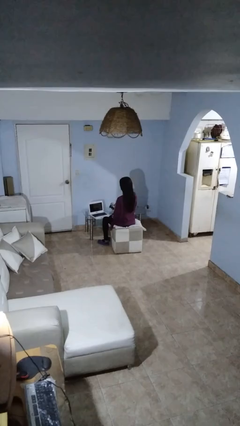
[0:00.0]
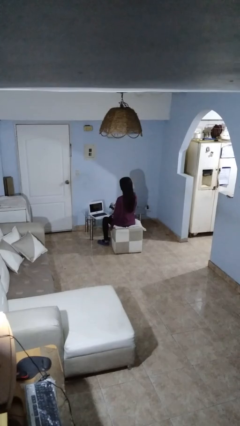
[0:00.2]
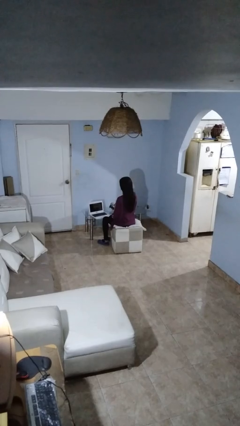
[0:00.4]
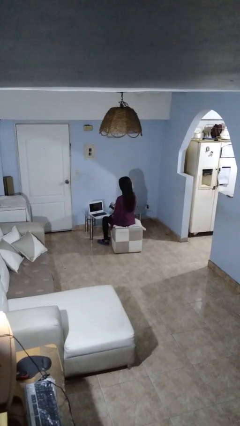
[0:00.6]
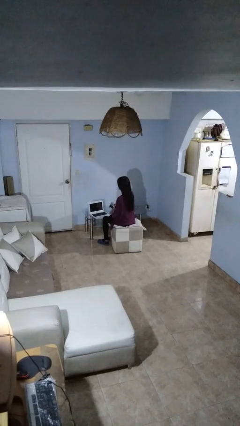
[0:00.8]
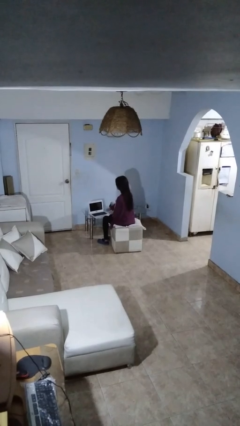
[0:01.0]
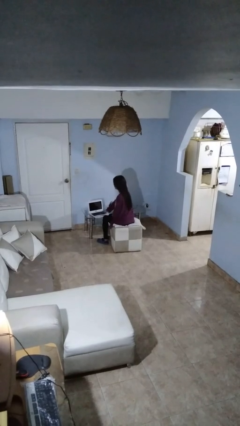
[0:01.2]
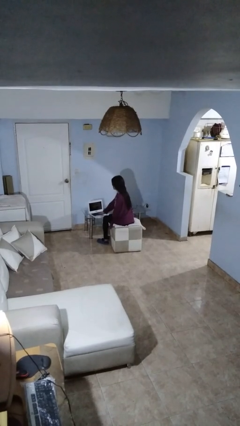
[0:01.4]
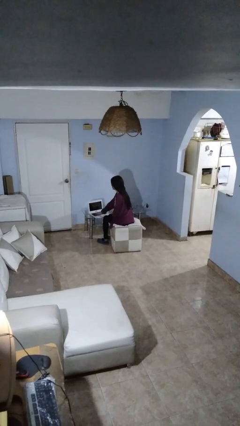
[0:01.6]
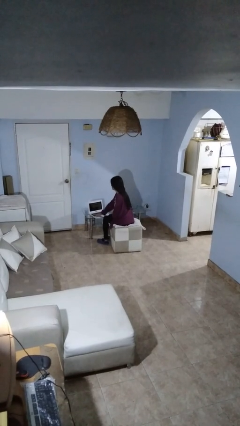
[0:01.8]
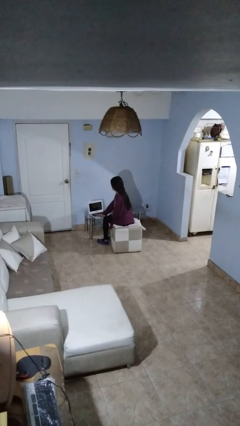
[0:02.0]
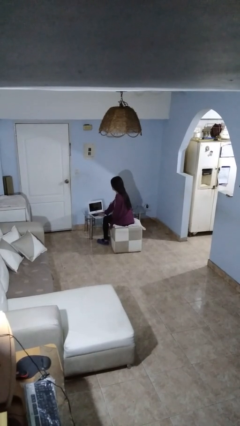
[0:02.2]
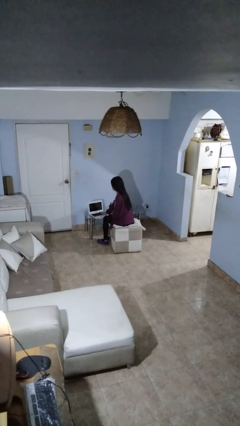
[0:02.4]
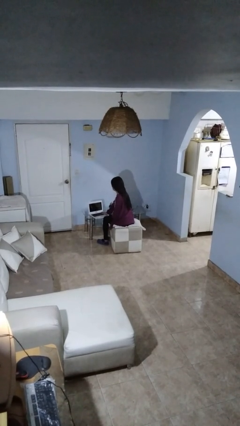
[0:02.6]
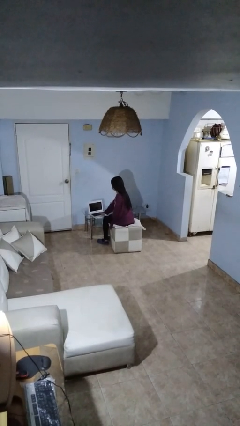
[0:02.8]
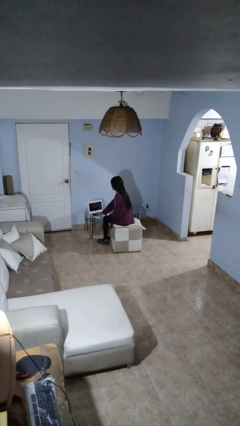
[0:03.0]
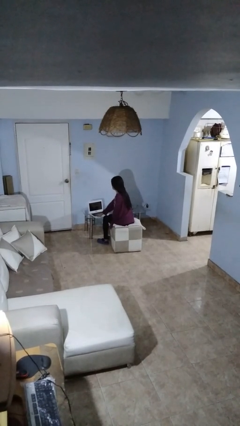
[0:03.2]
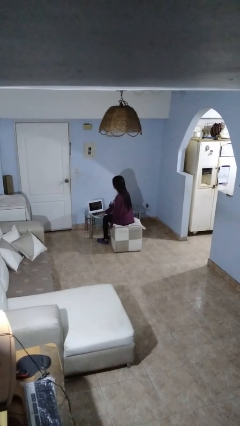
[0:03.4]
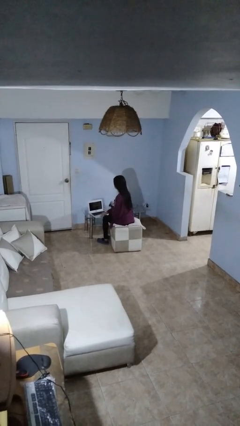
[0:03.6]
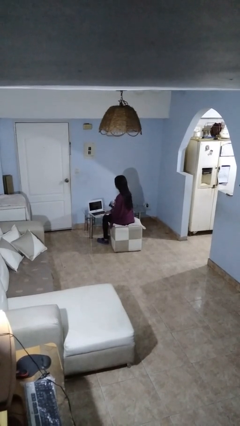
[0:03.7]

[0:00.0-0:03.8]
person waves hand over object

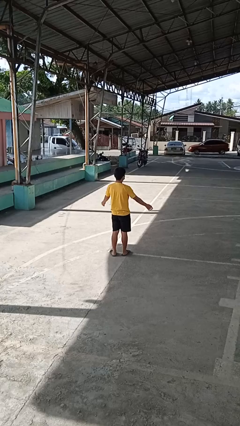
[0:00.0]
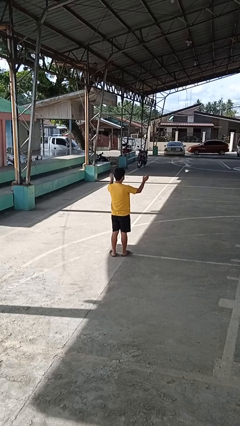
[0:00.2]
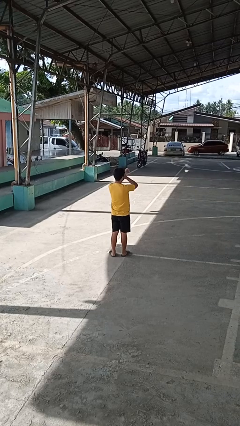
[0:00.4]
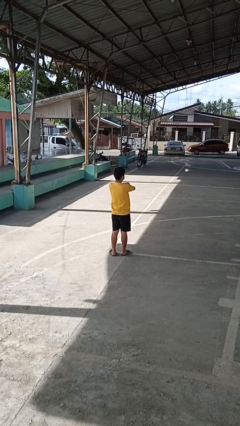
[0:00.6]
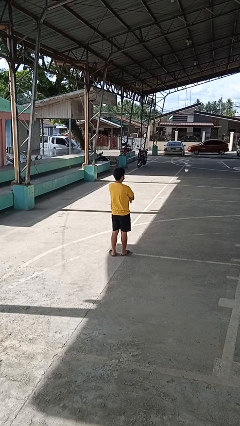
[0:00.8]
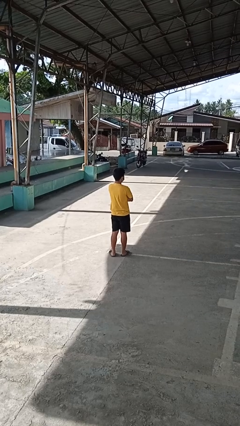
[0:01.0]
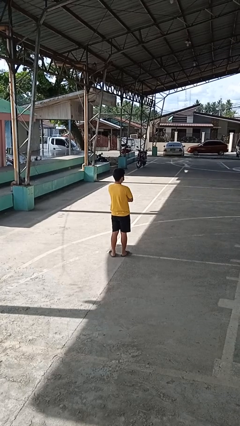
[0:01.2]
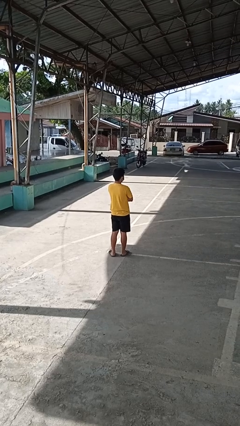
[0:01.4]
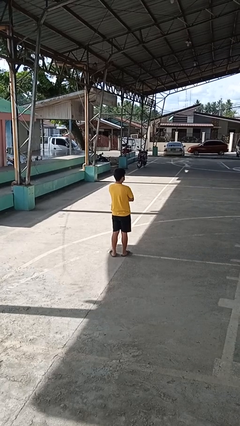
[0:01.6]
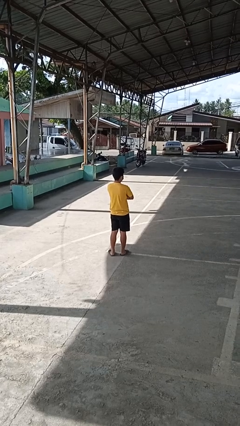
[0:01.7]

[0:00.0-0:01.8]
person crosses arms

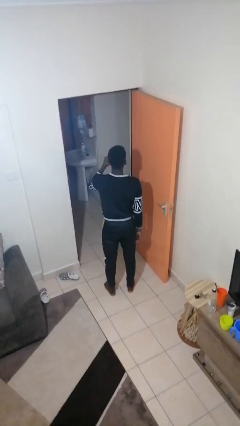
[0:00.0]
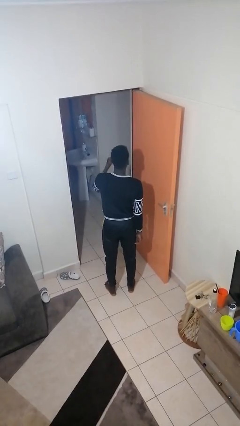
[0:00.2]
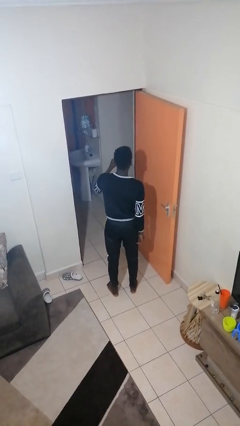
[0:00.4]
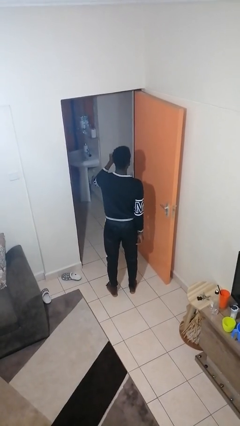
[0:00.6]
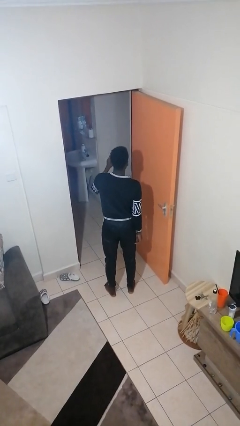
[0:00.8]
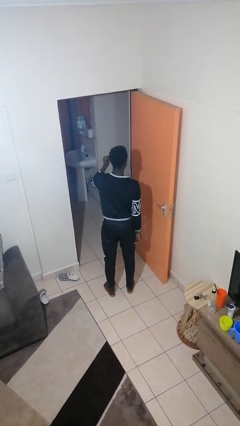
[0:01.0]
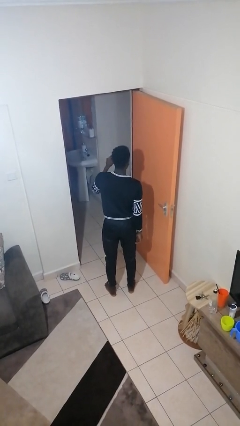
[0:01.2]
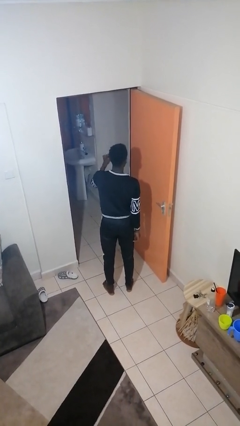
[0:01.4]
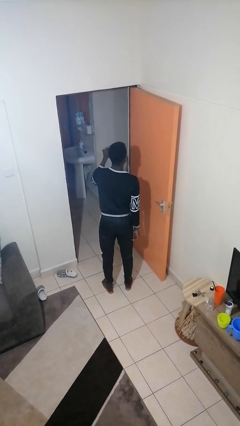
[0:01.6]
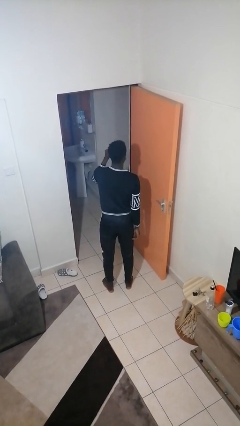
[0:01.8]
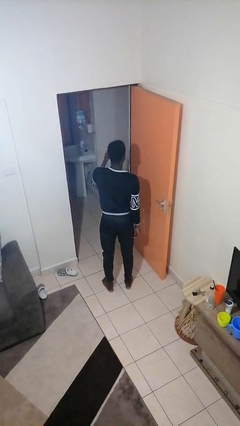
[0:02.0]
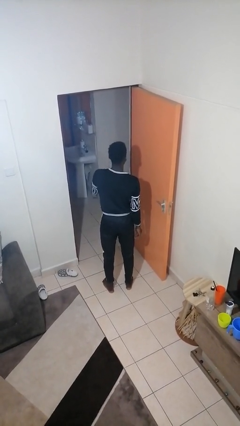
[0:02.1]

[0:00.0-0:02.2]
person snaps fingers

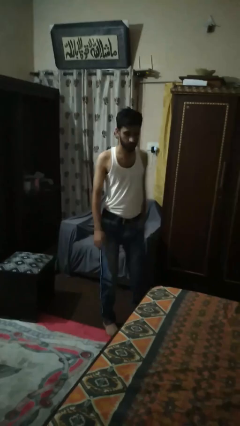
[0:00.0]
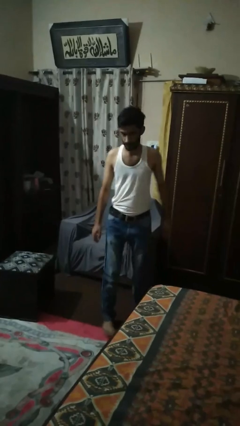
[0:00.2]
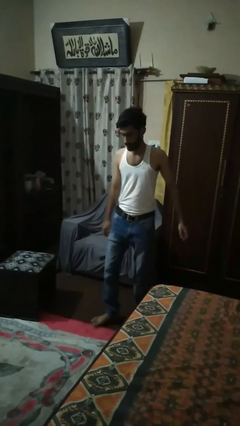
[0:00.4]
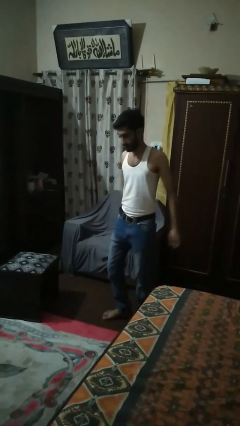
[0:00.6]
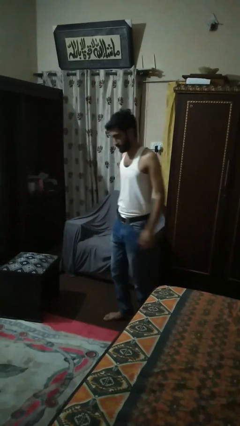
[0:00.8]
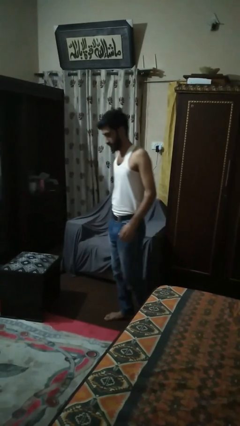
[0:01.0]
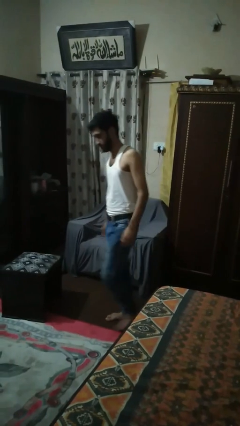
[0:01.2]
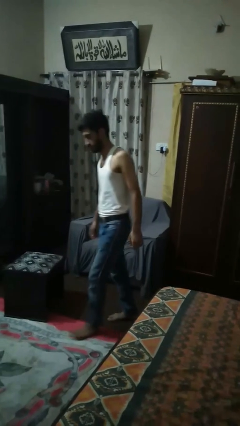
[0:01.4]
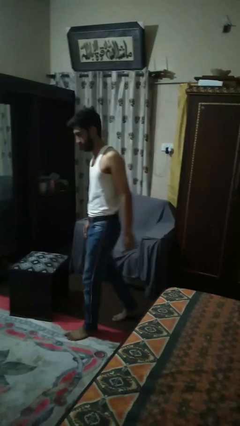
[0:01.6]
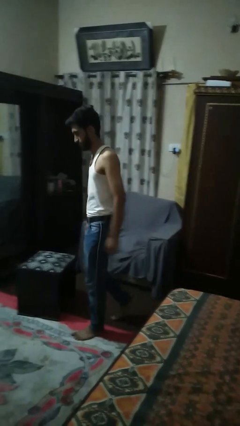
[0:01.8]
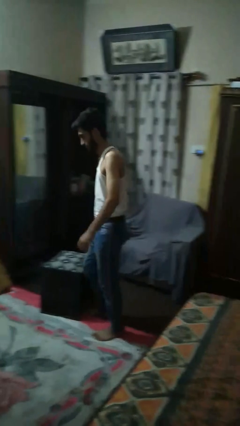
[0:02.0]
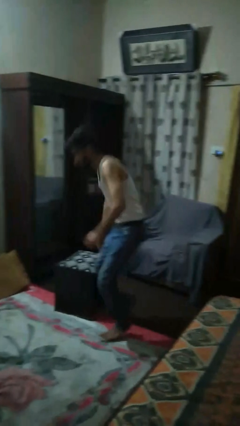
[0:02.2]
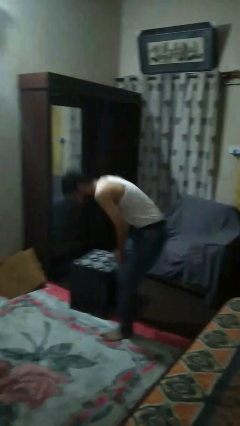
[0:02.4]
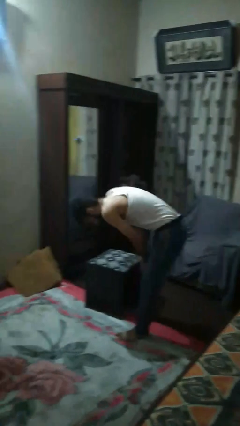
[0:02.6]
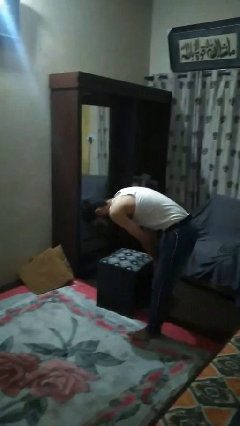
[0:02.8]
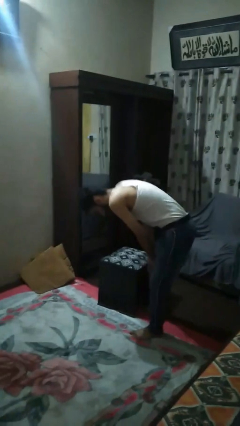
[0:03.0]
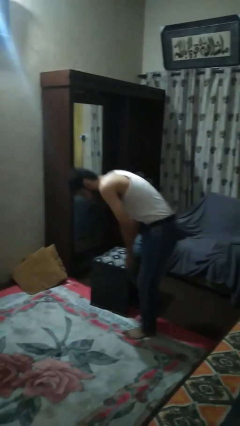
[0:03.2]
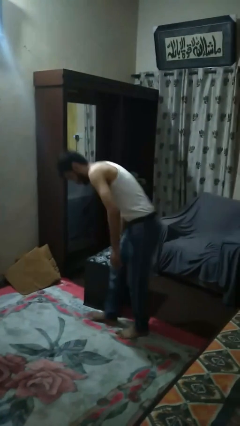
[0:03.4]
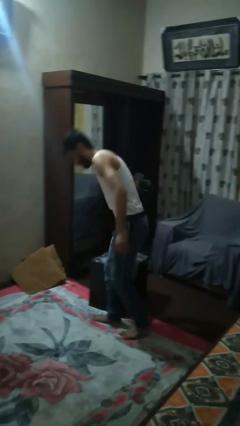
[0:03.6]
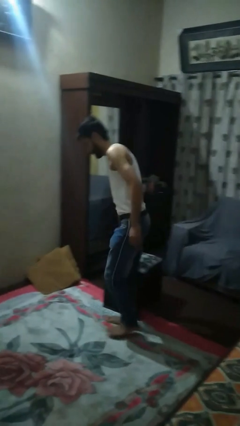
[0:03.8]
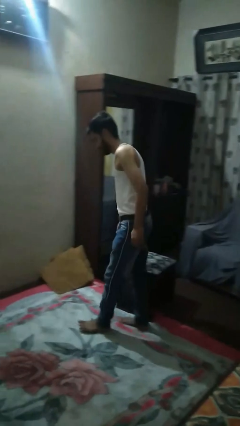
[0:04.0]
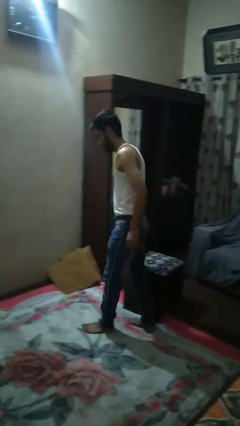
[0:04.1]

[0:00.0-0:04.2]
person bumps into table

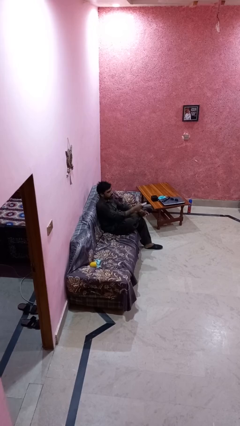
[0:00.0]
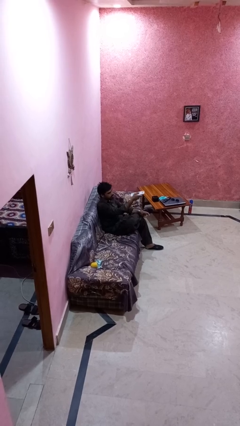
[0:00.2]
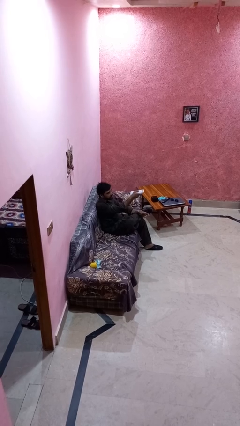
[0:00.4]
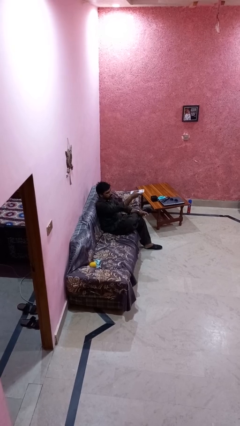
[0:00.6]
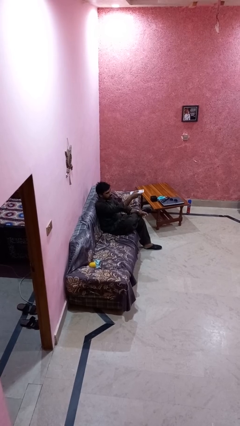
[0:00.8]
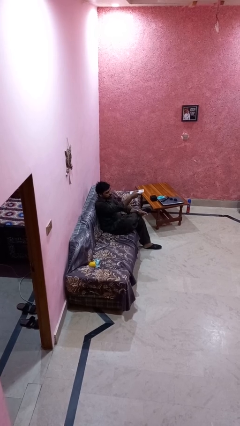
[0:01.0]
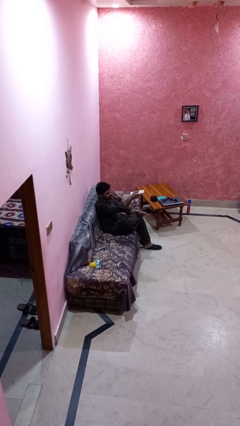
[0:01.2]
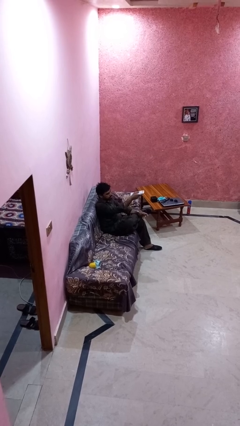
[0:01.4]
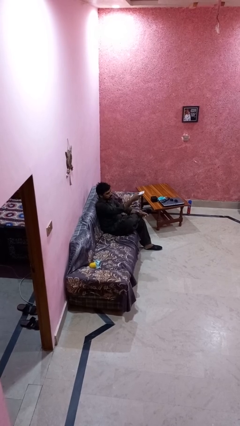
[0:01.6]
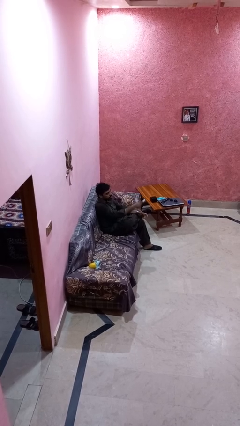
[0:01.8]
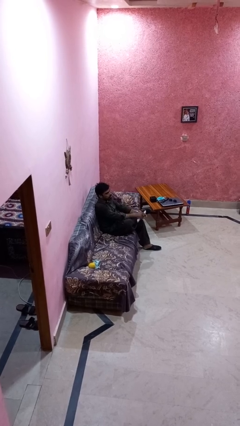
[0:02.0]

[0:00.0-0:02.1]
person uses television remote

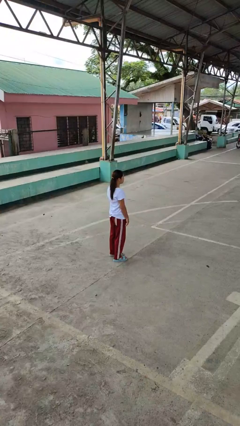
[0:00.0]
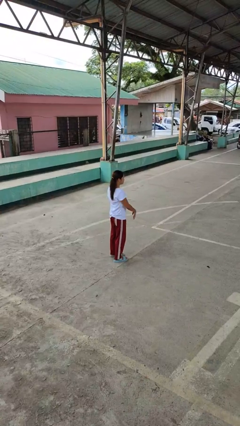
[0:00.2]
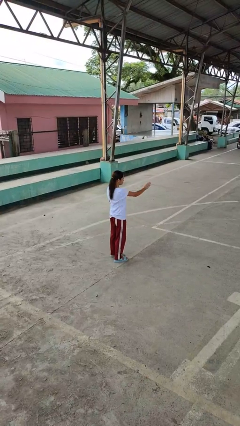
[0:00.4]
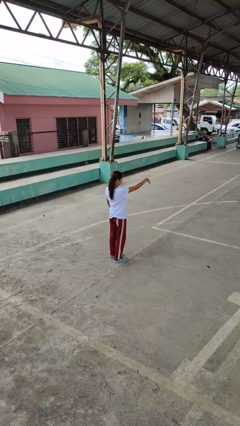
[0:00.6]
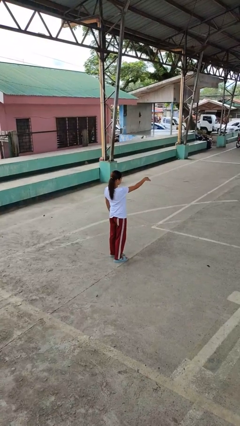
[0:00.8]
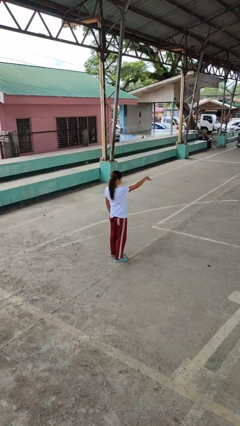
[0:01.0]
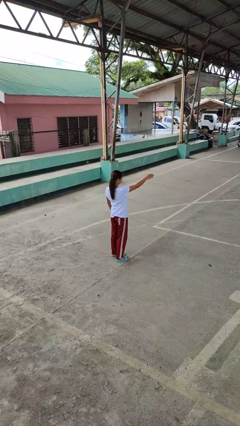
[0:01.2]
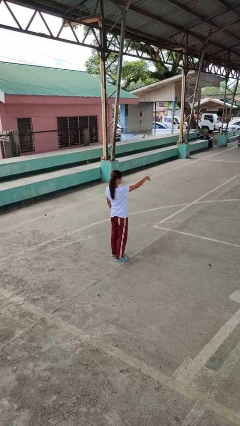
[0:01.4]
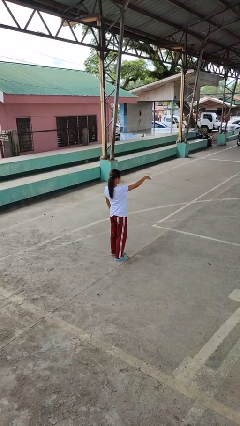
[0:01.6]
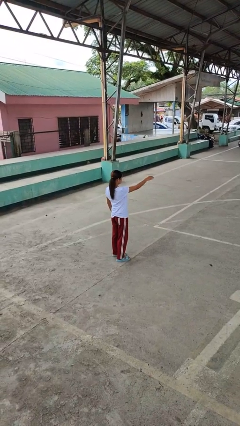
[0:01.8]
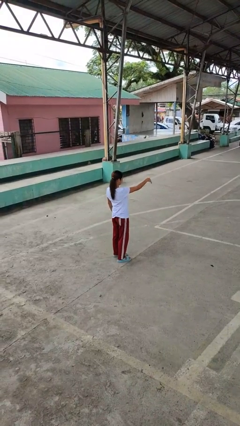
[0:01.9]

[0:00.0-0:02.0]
person gestures come here

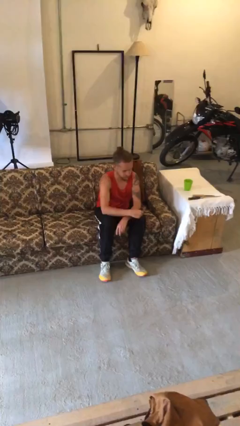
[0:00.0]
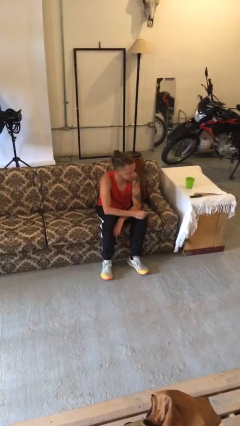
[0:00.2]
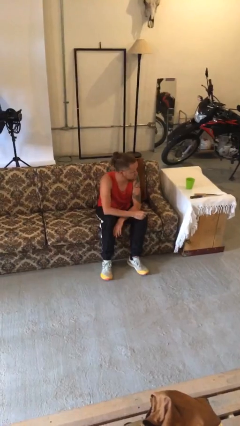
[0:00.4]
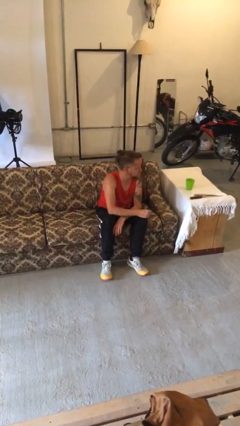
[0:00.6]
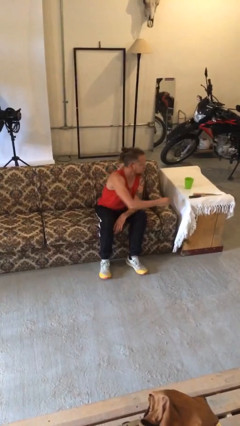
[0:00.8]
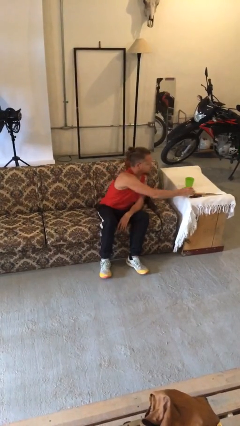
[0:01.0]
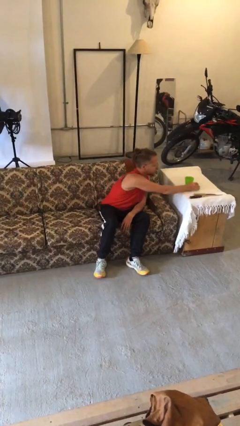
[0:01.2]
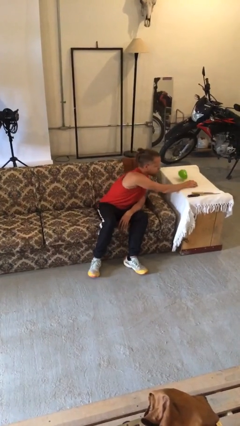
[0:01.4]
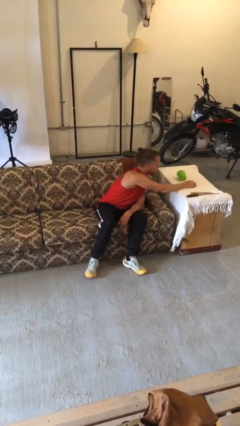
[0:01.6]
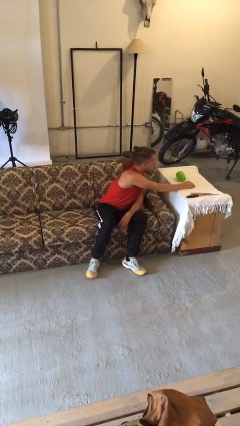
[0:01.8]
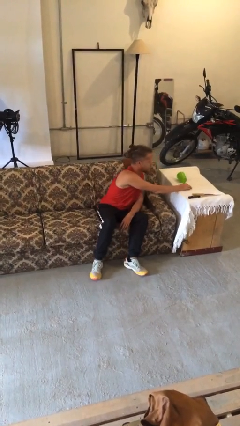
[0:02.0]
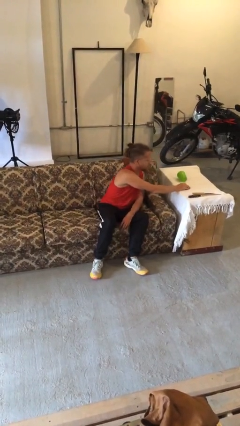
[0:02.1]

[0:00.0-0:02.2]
person knocks over glass
